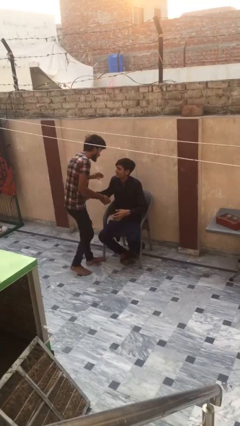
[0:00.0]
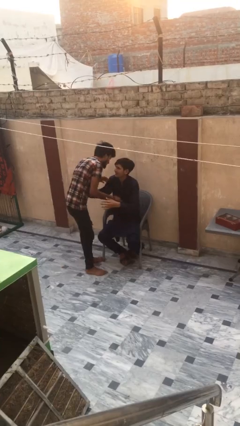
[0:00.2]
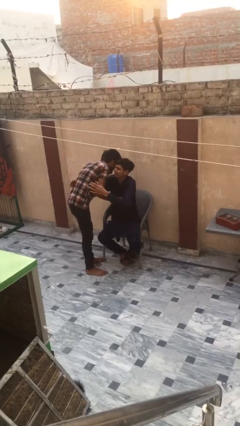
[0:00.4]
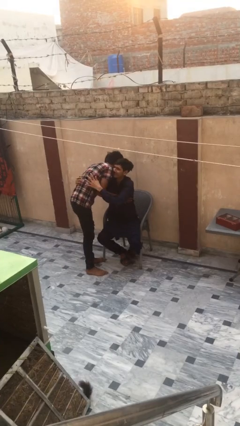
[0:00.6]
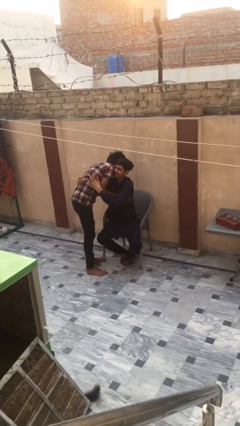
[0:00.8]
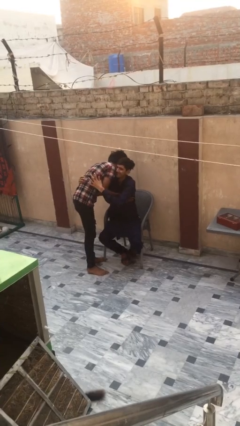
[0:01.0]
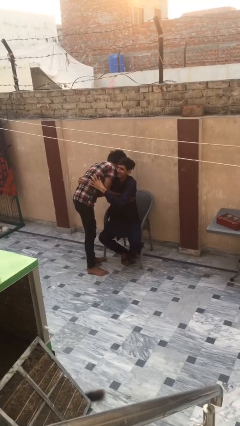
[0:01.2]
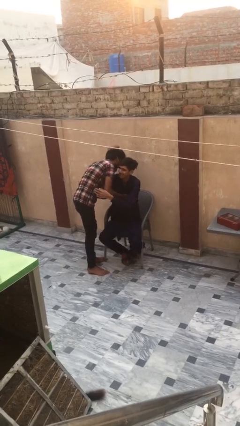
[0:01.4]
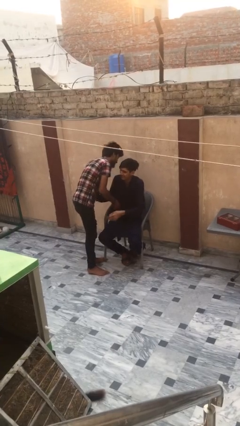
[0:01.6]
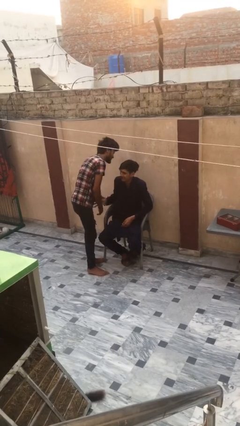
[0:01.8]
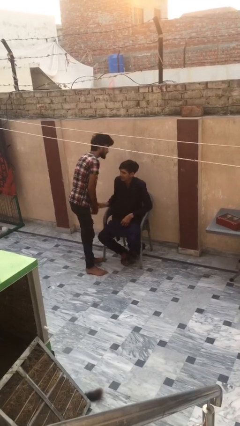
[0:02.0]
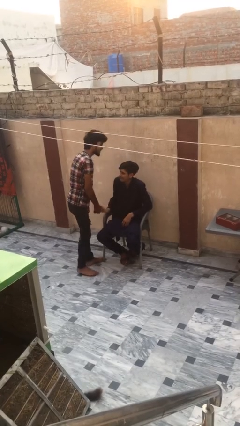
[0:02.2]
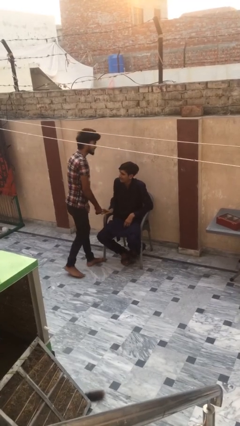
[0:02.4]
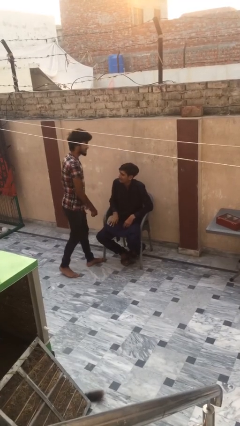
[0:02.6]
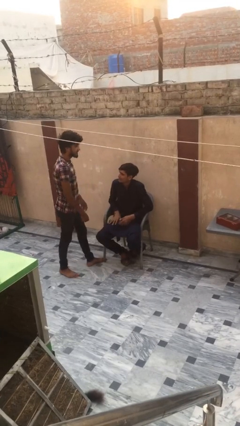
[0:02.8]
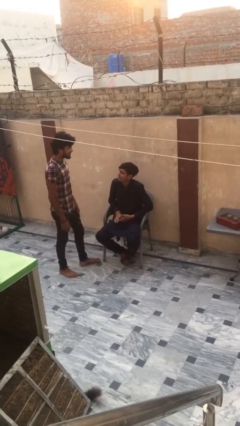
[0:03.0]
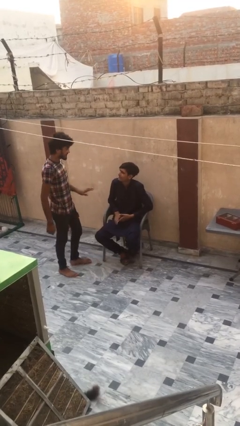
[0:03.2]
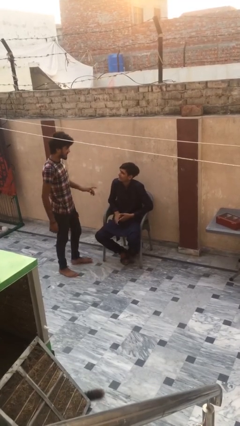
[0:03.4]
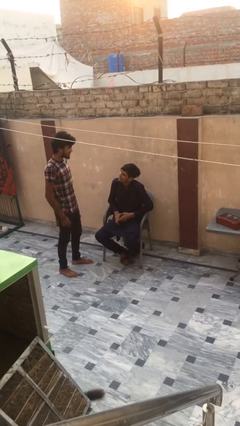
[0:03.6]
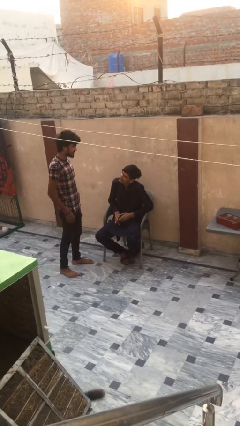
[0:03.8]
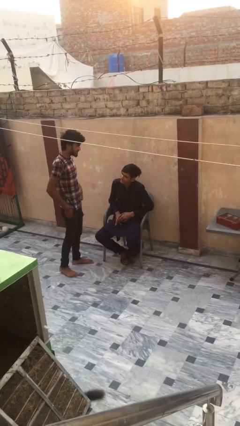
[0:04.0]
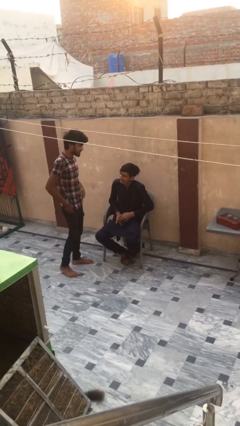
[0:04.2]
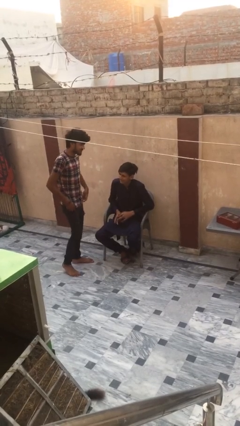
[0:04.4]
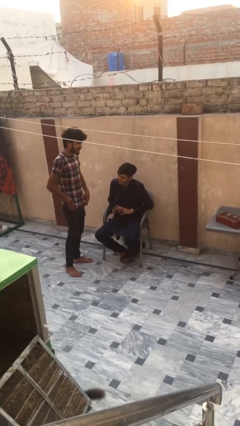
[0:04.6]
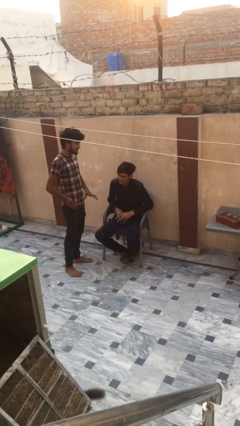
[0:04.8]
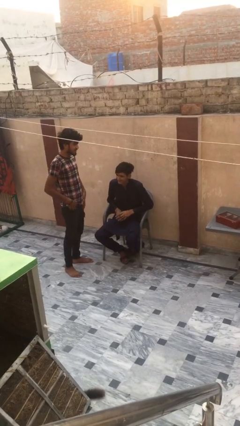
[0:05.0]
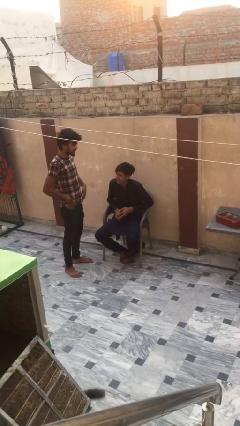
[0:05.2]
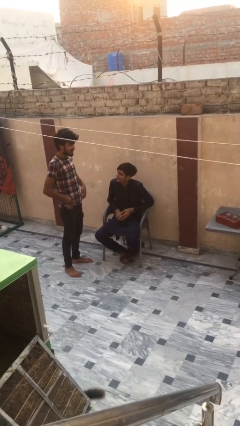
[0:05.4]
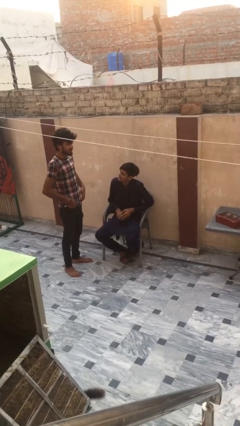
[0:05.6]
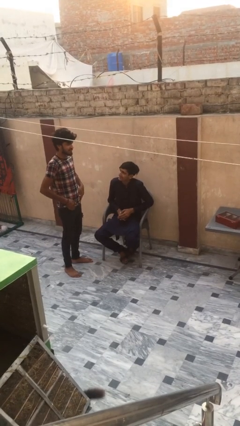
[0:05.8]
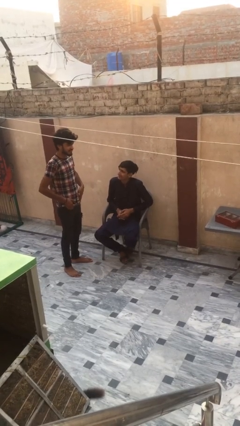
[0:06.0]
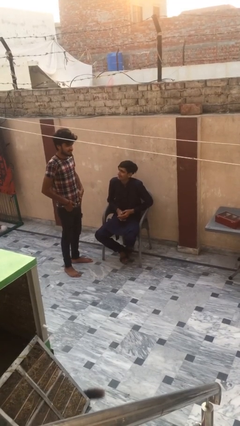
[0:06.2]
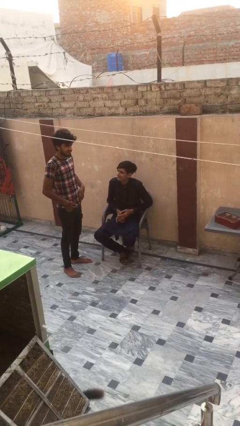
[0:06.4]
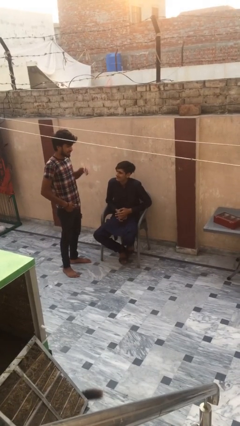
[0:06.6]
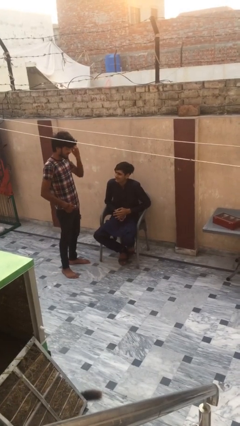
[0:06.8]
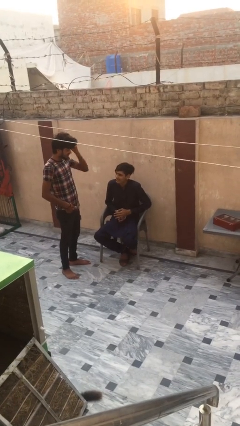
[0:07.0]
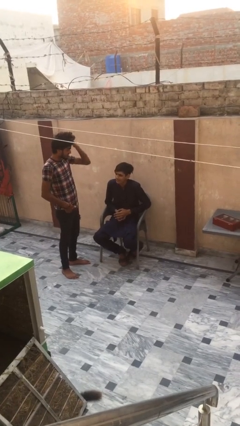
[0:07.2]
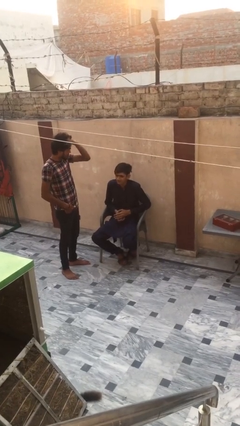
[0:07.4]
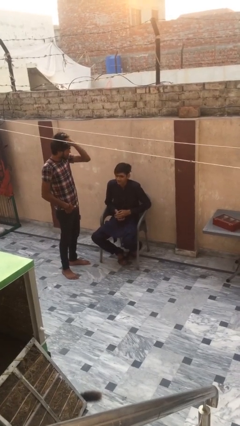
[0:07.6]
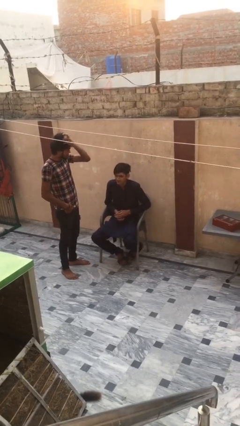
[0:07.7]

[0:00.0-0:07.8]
person embraces person

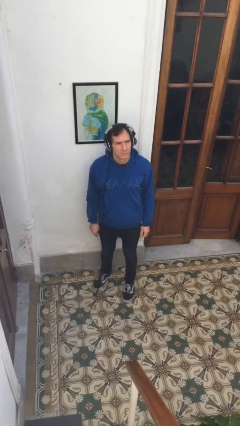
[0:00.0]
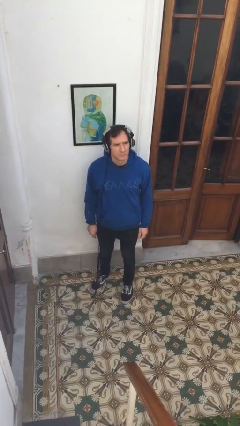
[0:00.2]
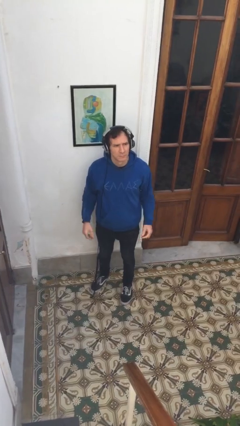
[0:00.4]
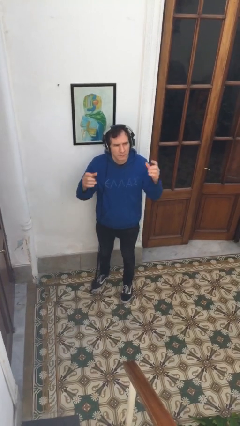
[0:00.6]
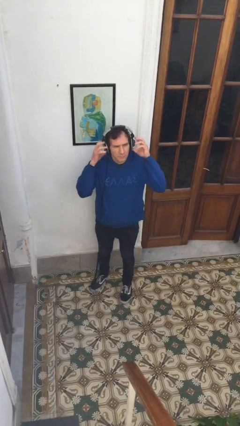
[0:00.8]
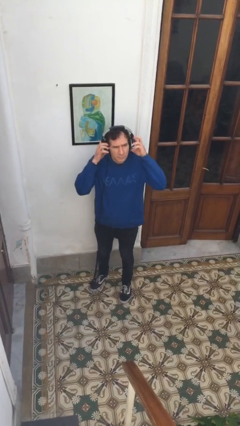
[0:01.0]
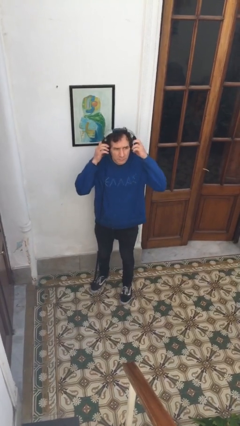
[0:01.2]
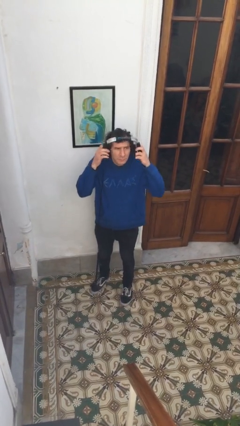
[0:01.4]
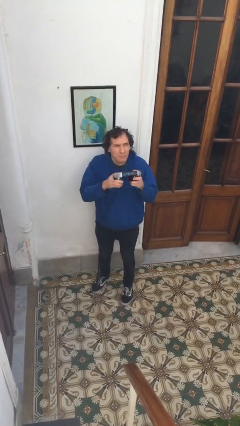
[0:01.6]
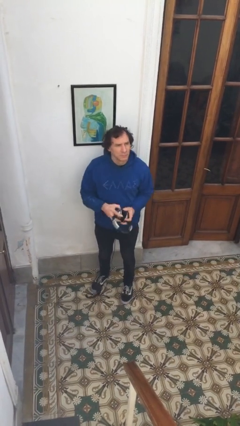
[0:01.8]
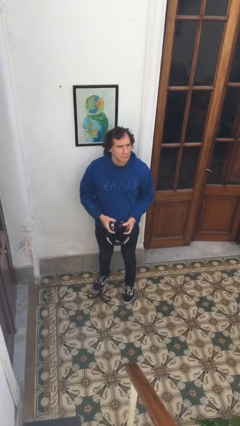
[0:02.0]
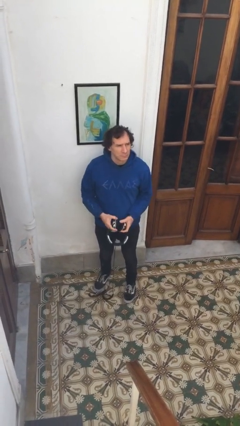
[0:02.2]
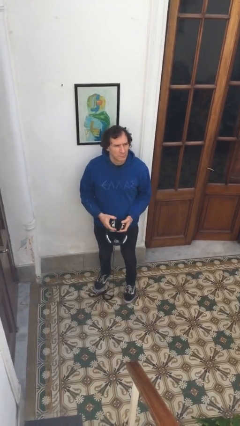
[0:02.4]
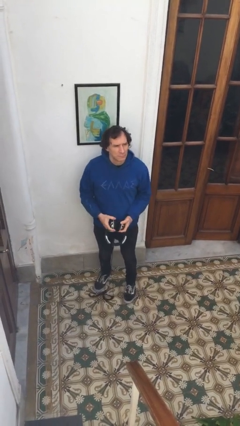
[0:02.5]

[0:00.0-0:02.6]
person takes off headphones

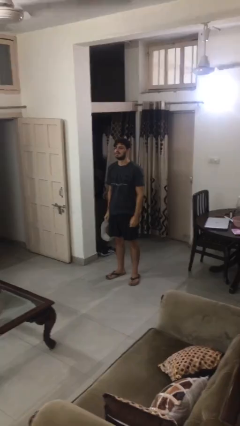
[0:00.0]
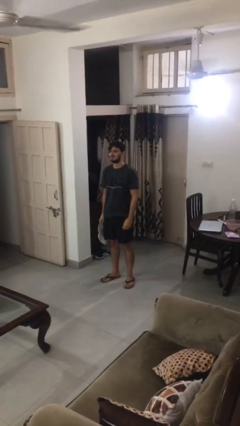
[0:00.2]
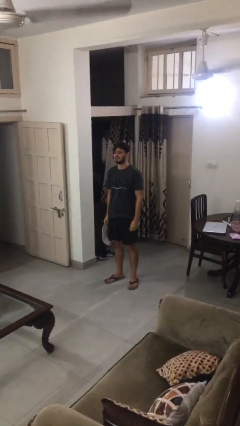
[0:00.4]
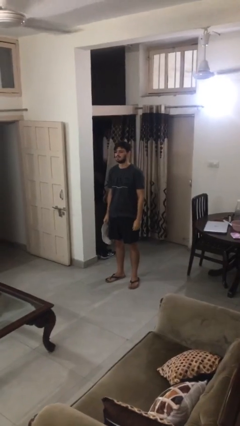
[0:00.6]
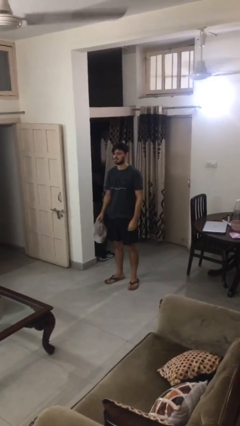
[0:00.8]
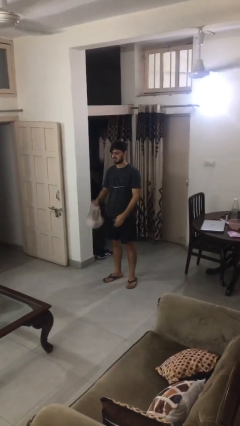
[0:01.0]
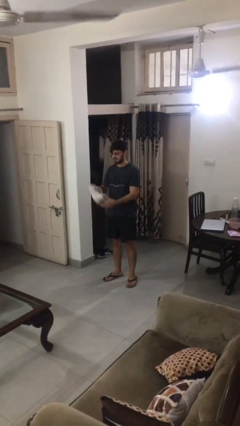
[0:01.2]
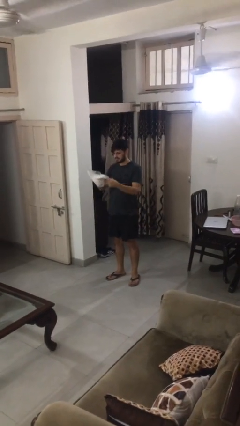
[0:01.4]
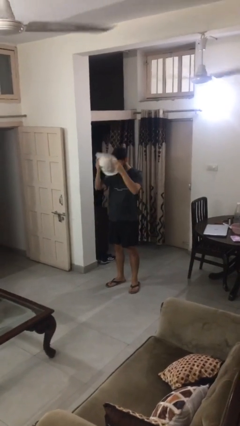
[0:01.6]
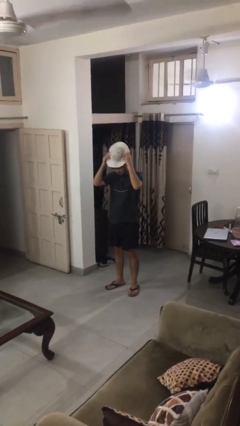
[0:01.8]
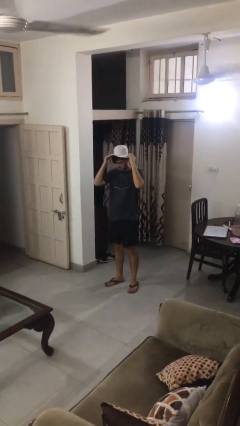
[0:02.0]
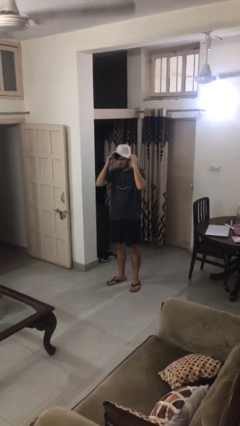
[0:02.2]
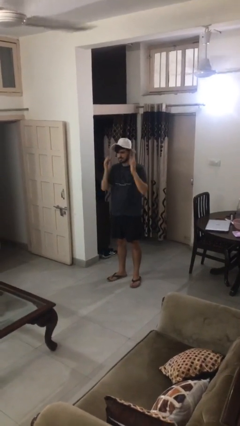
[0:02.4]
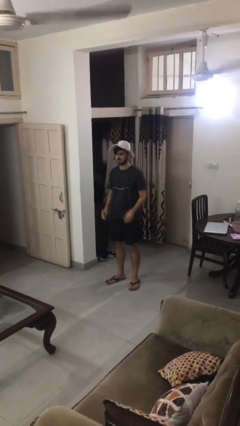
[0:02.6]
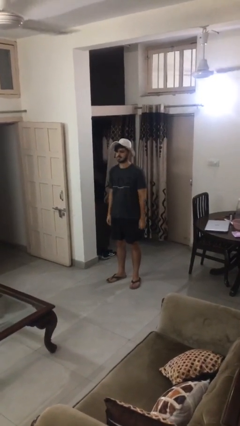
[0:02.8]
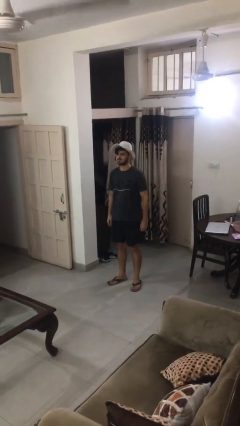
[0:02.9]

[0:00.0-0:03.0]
person puts on hat

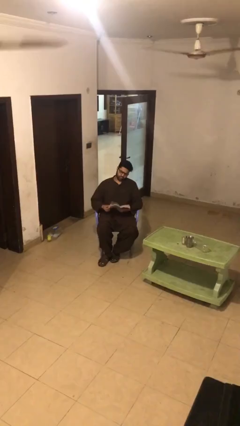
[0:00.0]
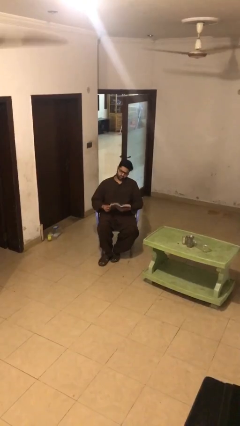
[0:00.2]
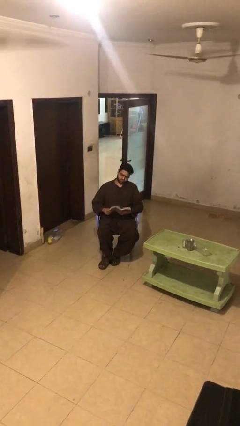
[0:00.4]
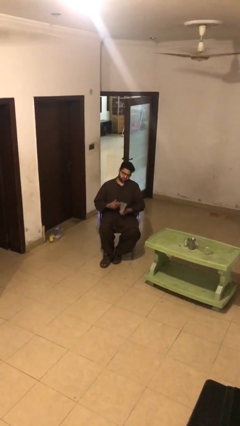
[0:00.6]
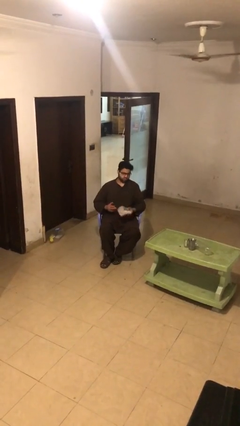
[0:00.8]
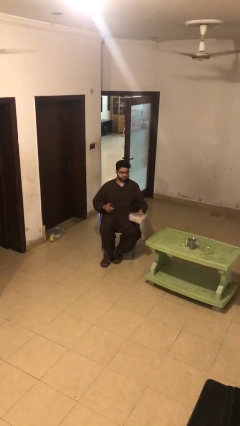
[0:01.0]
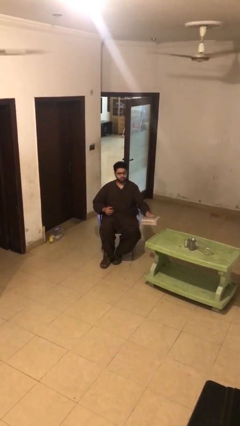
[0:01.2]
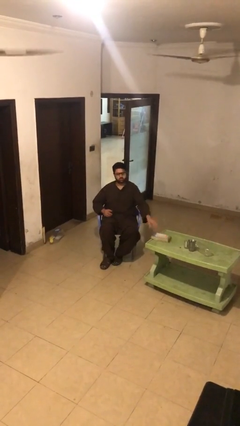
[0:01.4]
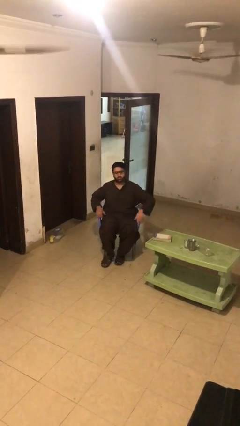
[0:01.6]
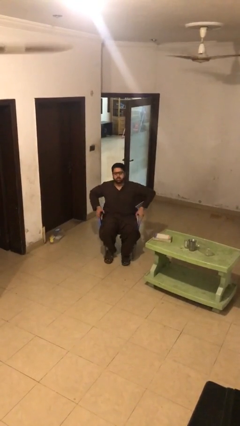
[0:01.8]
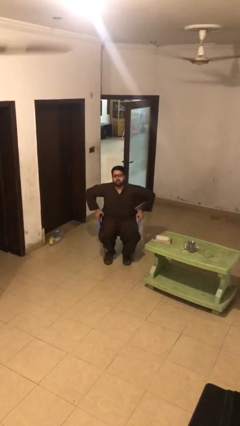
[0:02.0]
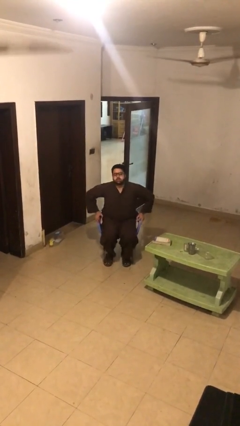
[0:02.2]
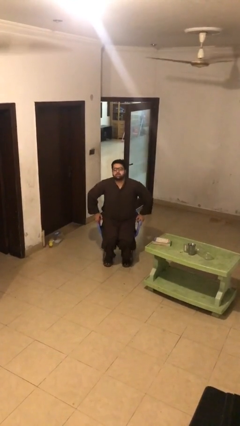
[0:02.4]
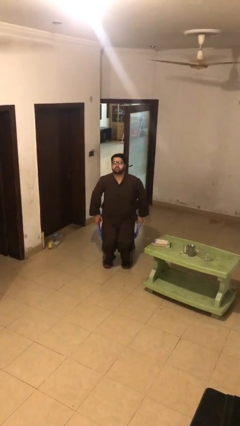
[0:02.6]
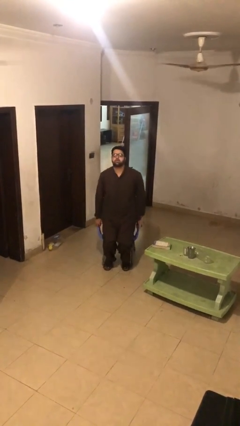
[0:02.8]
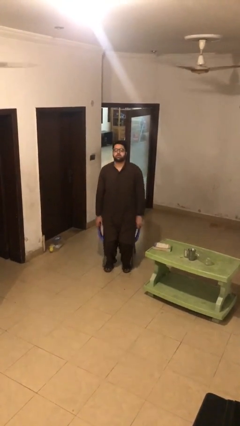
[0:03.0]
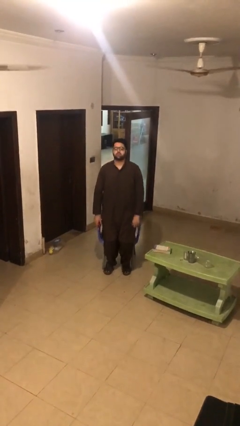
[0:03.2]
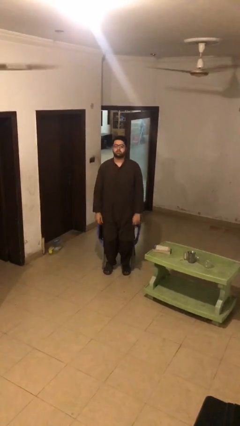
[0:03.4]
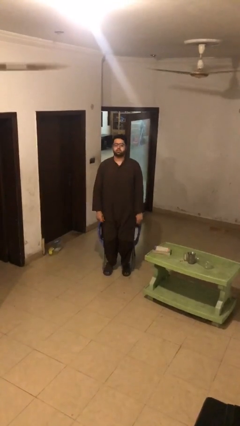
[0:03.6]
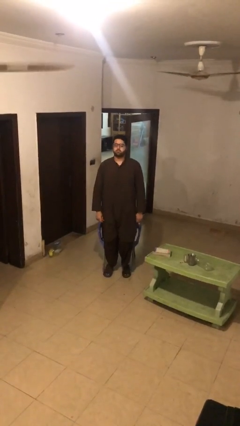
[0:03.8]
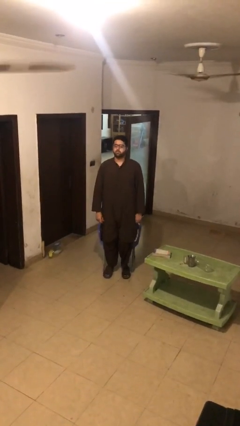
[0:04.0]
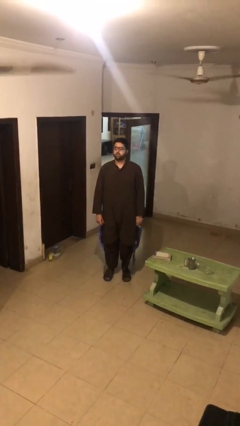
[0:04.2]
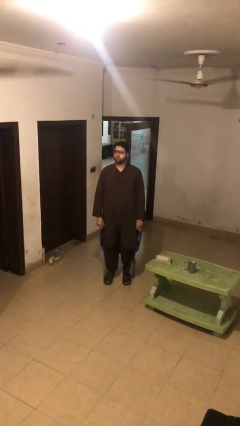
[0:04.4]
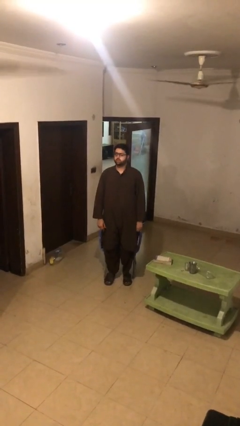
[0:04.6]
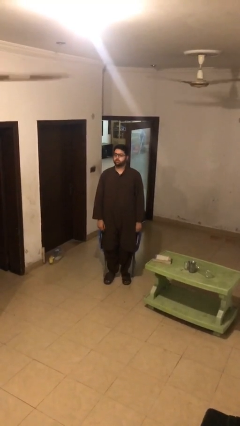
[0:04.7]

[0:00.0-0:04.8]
person stands up
